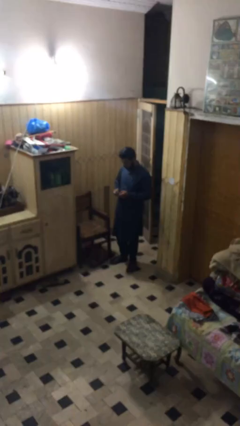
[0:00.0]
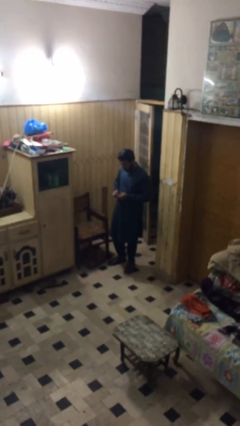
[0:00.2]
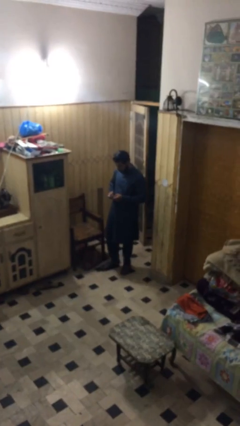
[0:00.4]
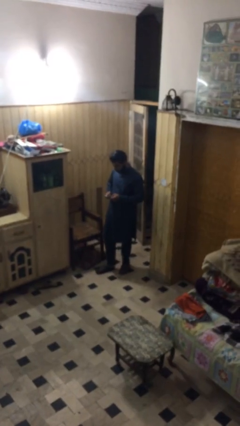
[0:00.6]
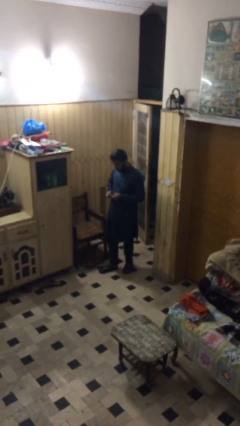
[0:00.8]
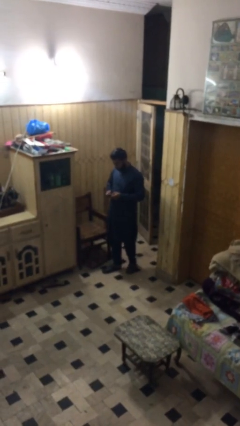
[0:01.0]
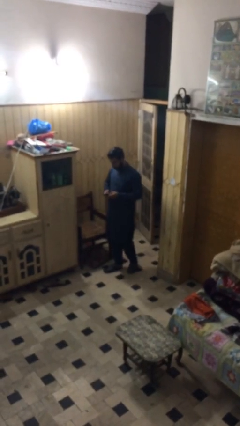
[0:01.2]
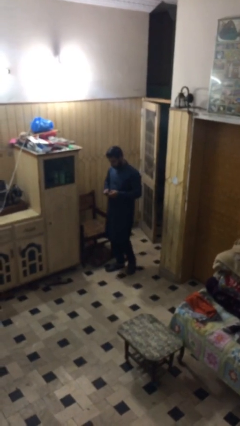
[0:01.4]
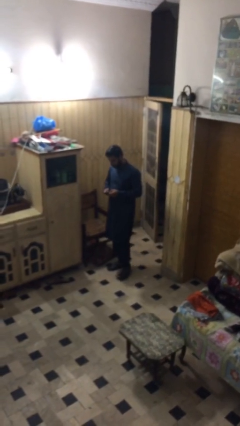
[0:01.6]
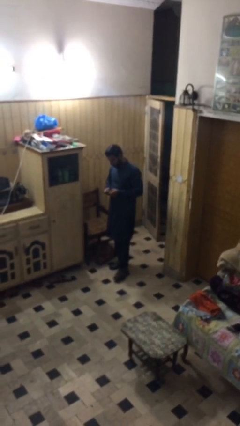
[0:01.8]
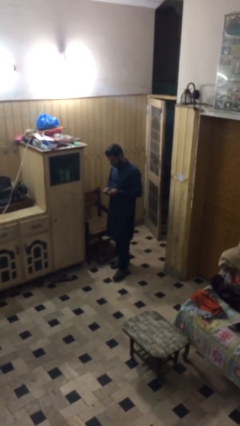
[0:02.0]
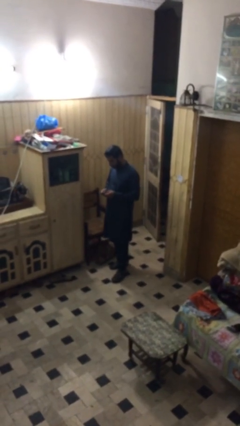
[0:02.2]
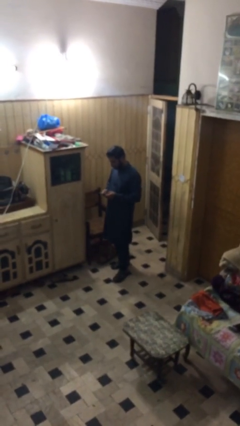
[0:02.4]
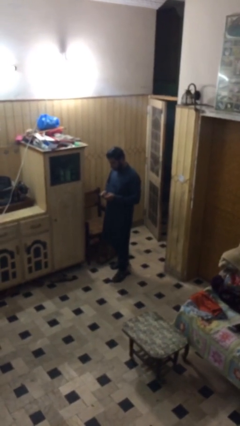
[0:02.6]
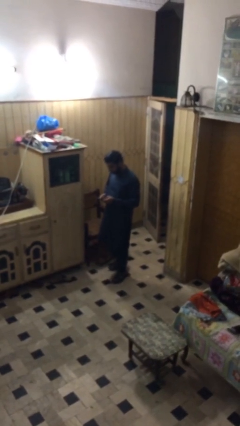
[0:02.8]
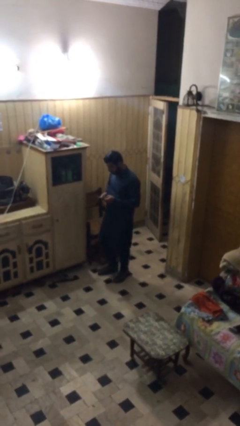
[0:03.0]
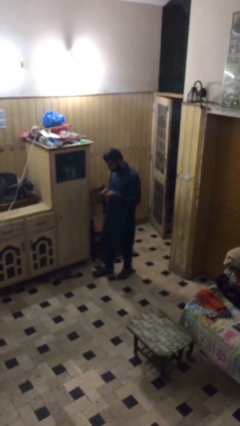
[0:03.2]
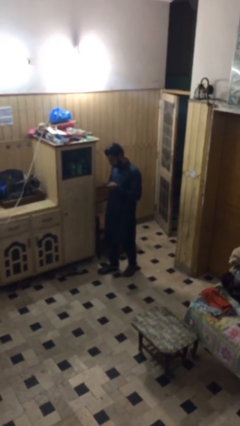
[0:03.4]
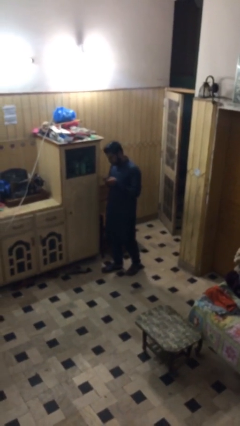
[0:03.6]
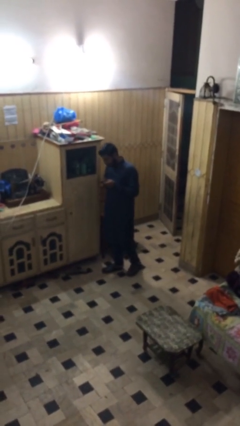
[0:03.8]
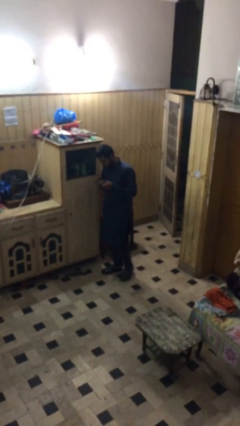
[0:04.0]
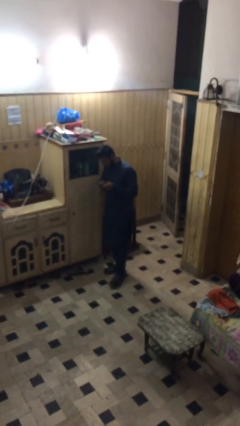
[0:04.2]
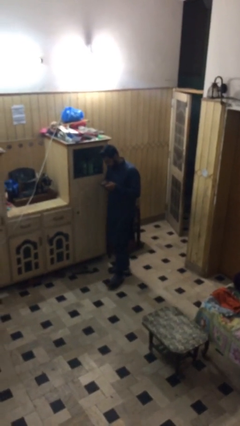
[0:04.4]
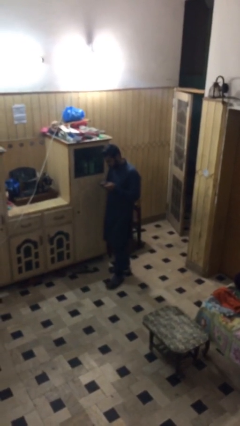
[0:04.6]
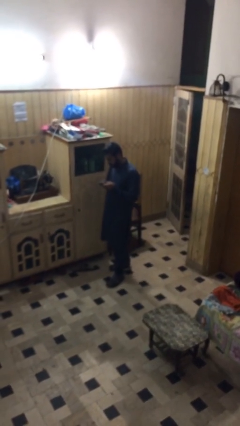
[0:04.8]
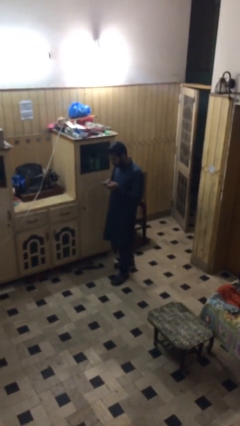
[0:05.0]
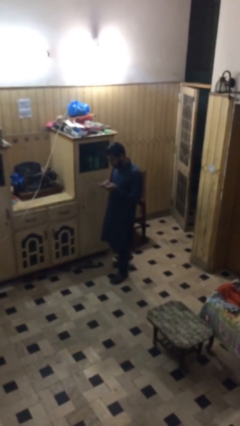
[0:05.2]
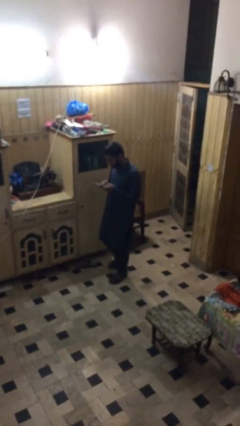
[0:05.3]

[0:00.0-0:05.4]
person texts on phone

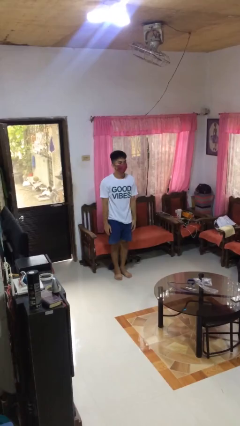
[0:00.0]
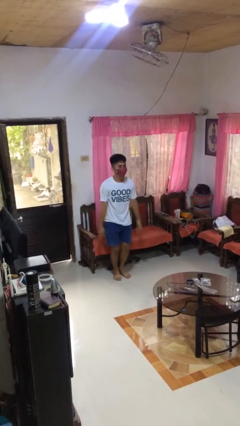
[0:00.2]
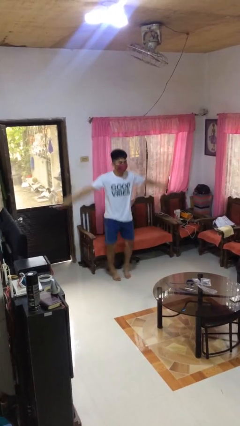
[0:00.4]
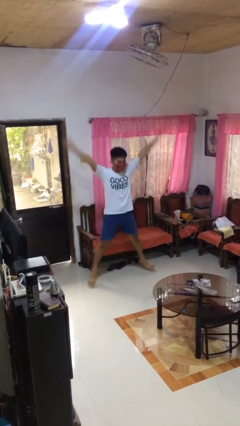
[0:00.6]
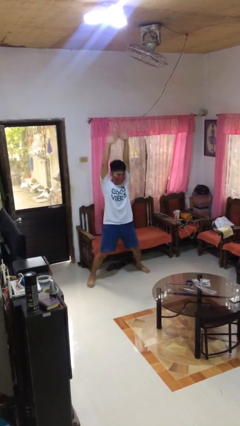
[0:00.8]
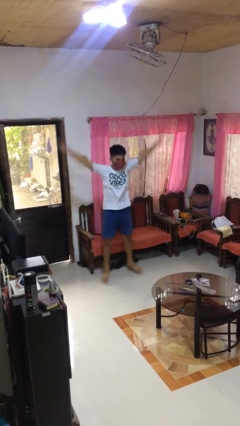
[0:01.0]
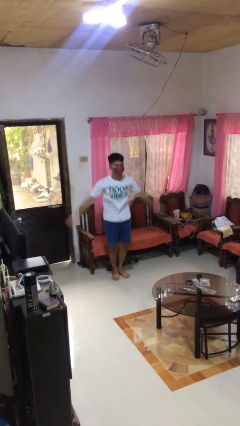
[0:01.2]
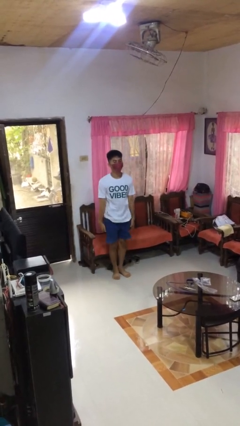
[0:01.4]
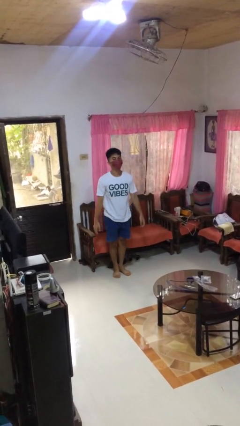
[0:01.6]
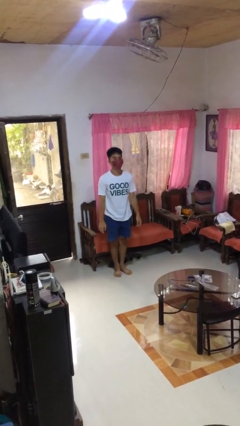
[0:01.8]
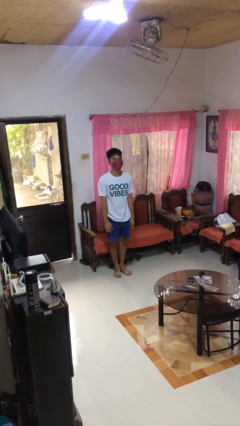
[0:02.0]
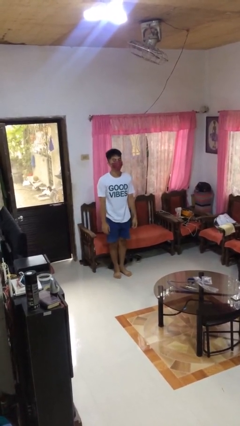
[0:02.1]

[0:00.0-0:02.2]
person exercises with jumping jacks

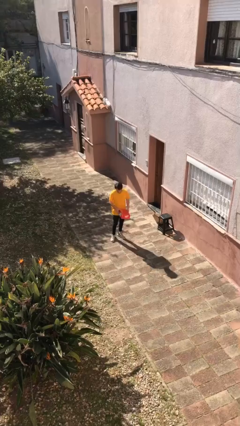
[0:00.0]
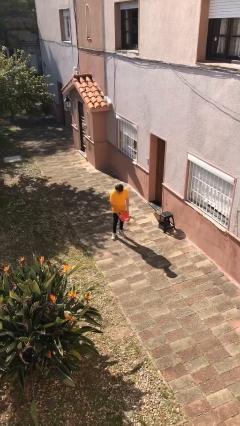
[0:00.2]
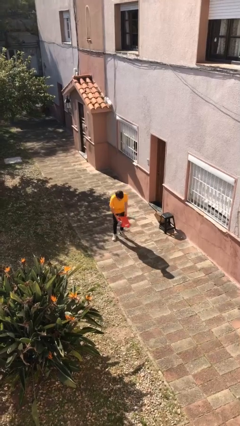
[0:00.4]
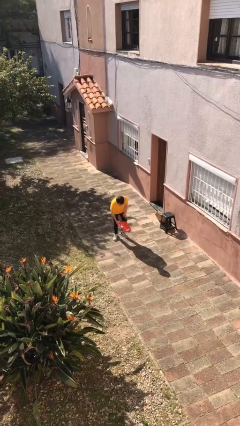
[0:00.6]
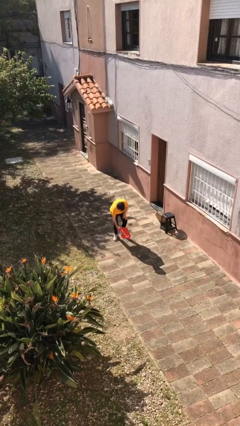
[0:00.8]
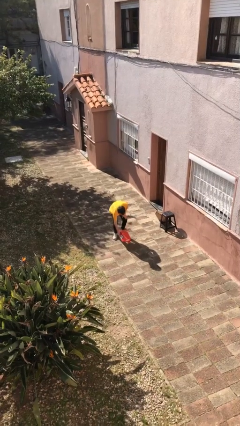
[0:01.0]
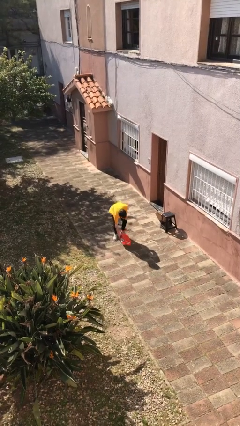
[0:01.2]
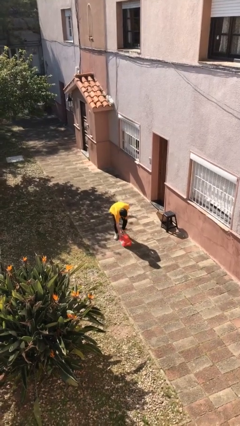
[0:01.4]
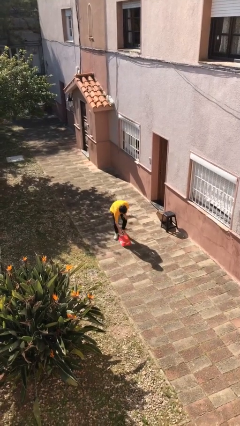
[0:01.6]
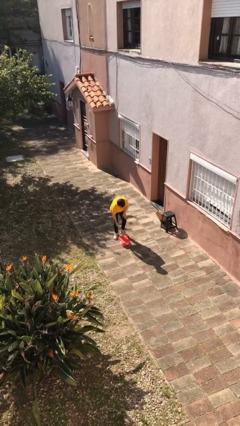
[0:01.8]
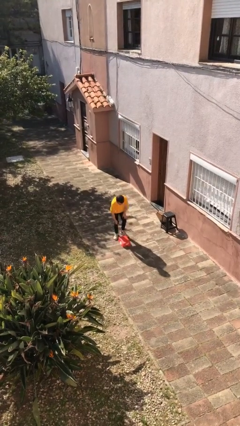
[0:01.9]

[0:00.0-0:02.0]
person puts down object on floor

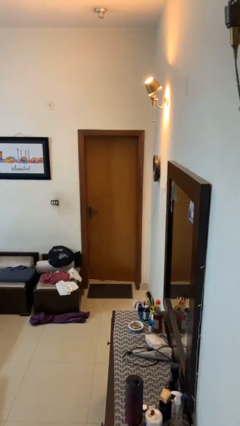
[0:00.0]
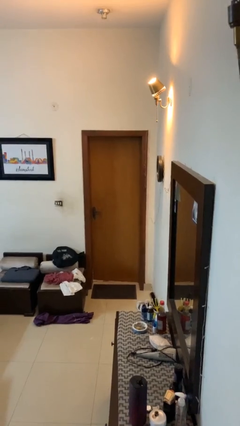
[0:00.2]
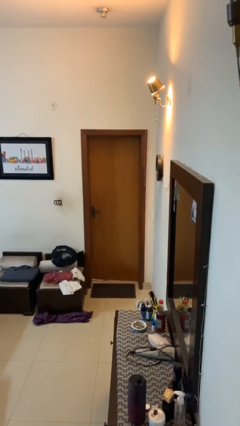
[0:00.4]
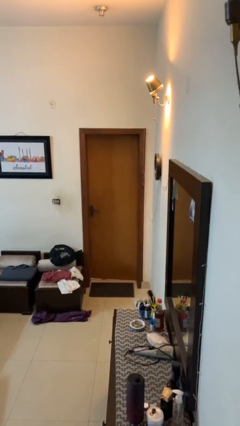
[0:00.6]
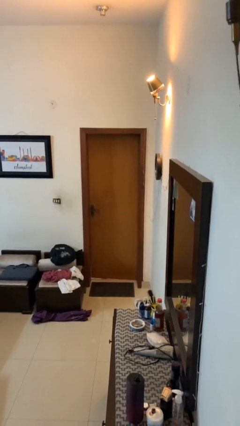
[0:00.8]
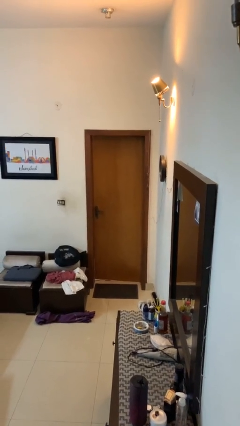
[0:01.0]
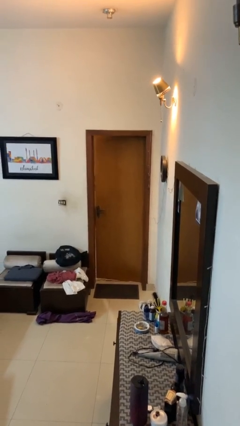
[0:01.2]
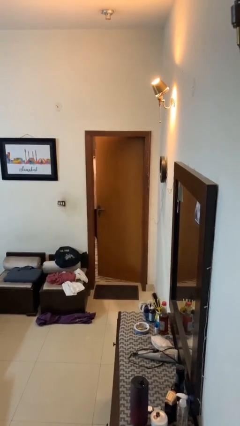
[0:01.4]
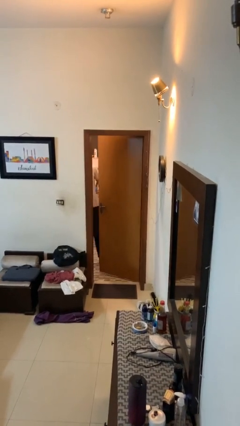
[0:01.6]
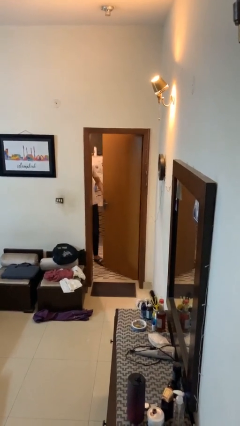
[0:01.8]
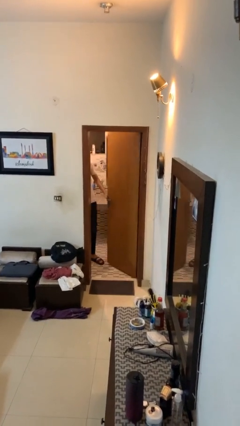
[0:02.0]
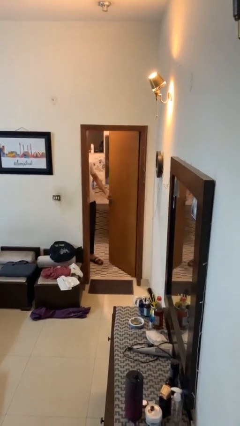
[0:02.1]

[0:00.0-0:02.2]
person opens facility door

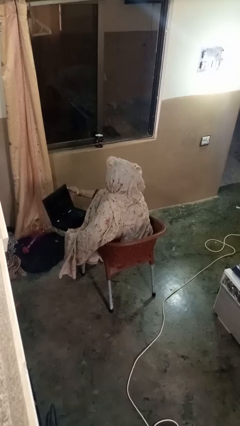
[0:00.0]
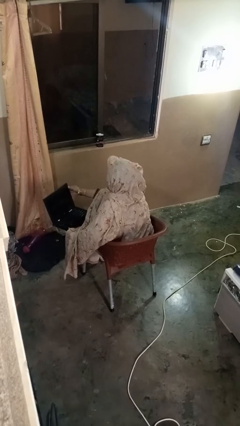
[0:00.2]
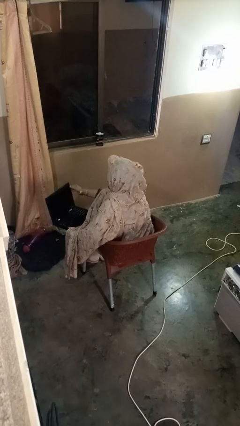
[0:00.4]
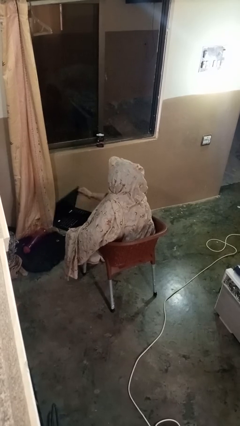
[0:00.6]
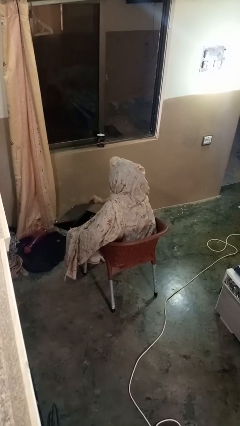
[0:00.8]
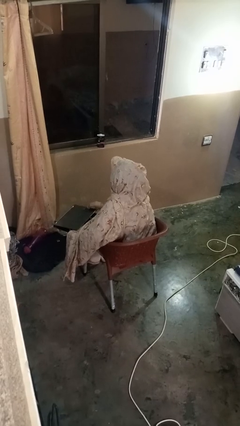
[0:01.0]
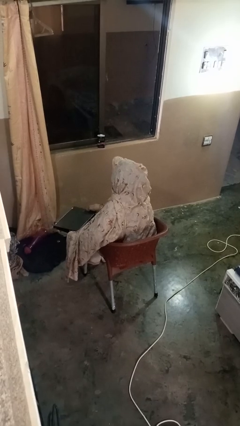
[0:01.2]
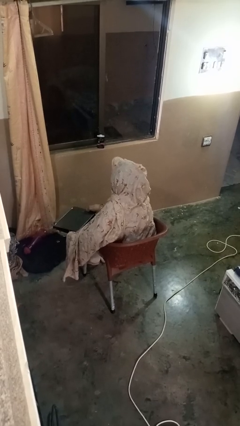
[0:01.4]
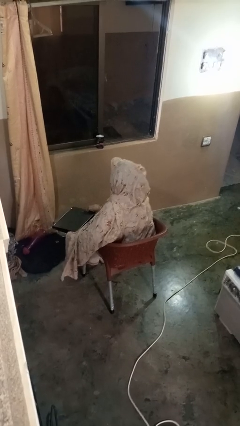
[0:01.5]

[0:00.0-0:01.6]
person closes laptop

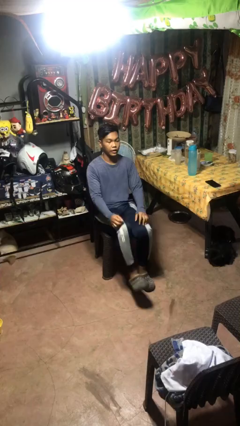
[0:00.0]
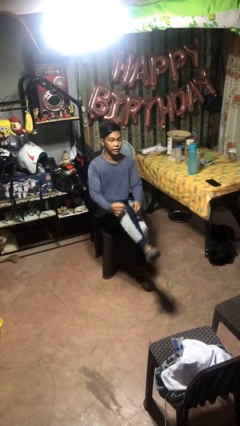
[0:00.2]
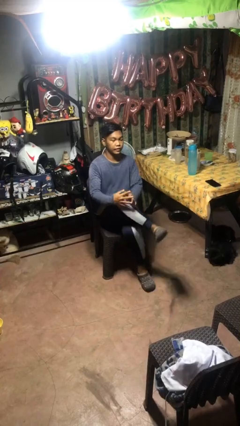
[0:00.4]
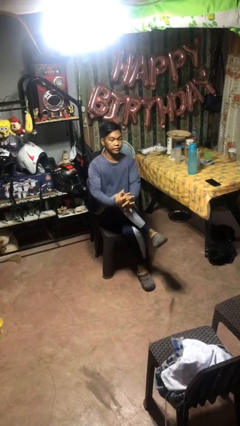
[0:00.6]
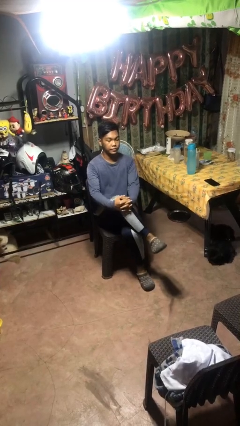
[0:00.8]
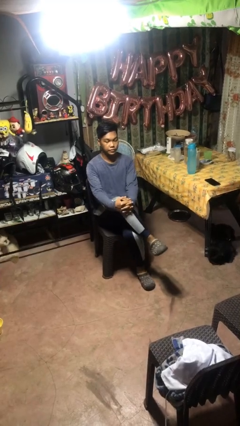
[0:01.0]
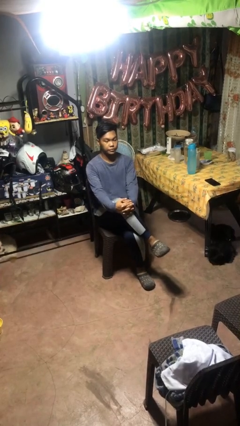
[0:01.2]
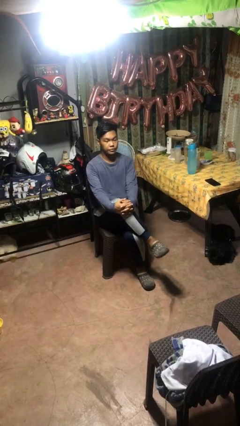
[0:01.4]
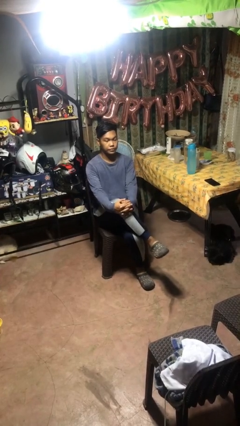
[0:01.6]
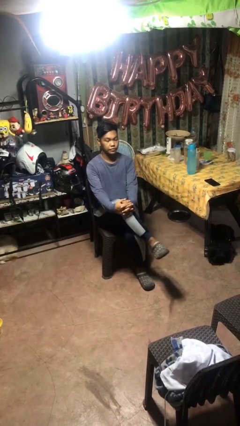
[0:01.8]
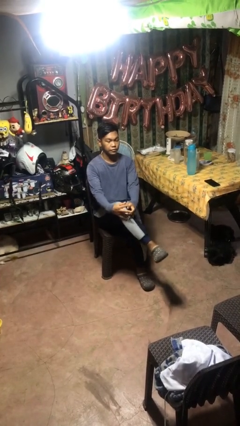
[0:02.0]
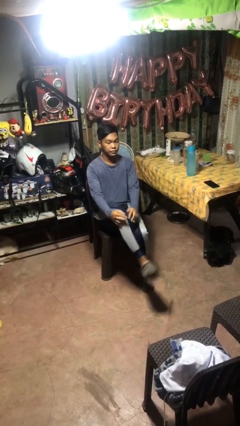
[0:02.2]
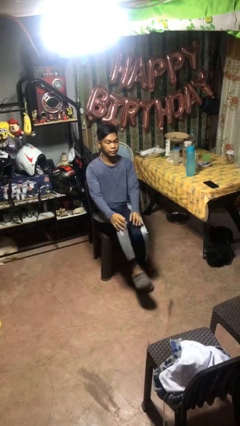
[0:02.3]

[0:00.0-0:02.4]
person crosses legs

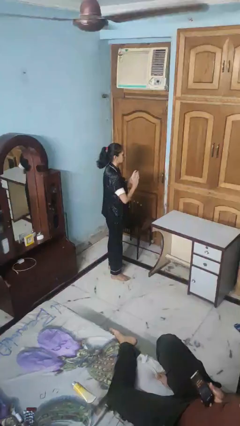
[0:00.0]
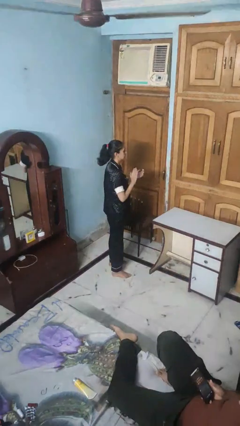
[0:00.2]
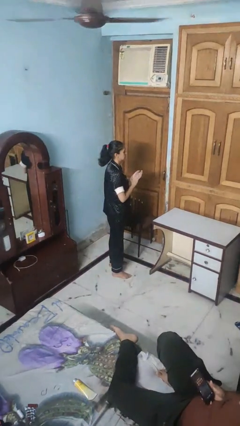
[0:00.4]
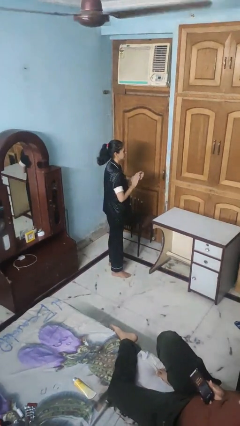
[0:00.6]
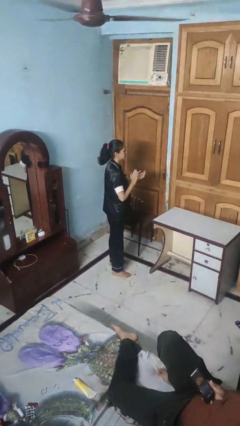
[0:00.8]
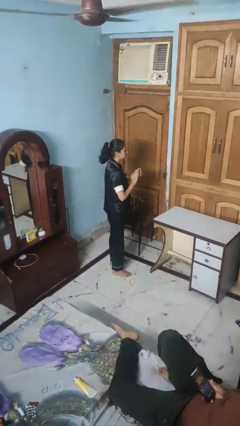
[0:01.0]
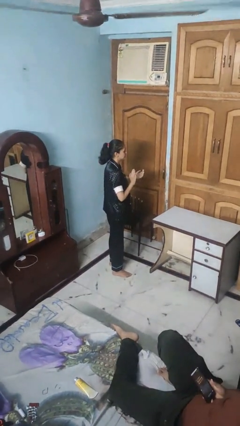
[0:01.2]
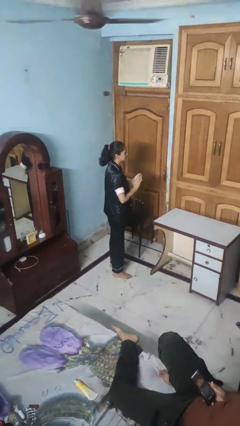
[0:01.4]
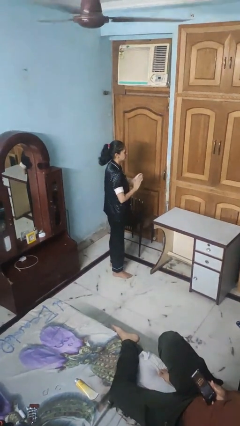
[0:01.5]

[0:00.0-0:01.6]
person claps hands
